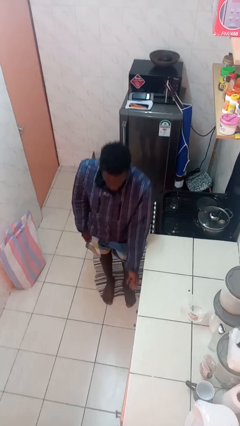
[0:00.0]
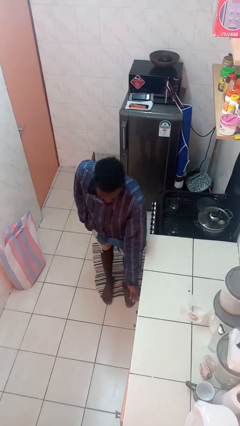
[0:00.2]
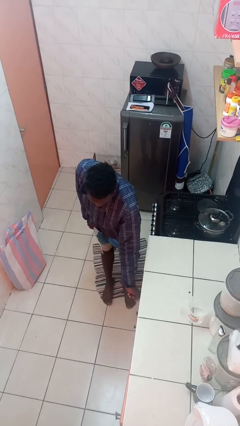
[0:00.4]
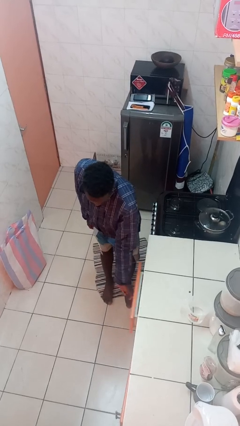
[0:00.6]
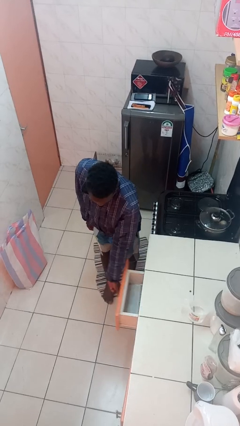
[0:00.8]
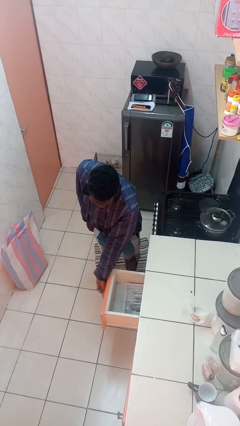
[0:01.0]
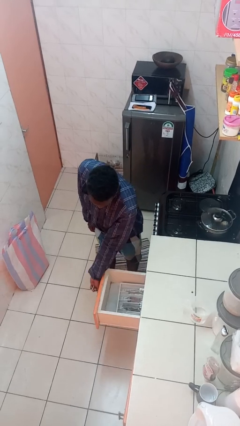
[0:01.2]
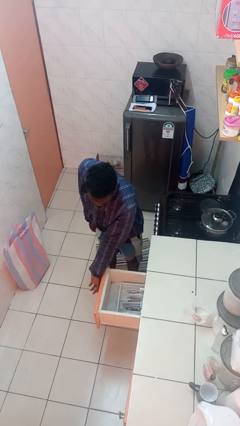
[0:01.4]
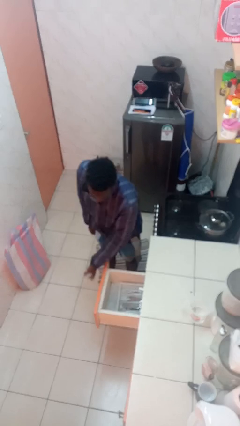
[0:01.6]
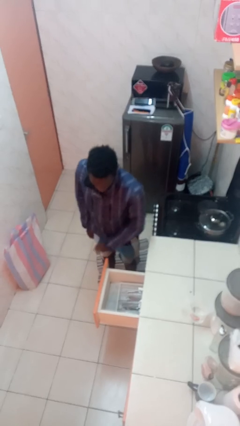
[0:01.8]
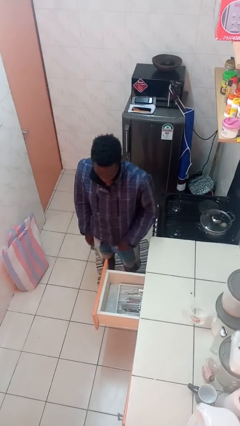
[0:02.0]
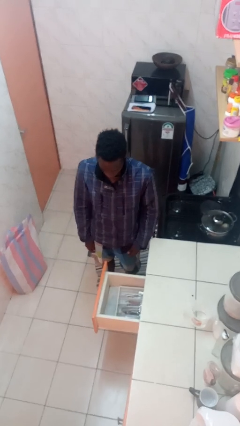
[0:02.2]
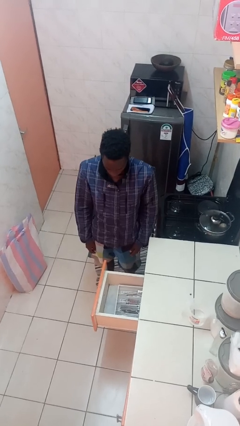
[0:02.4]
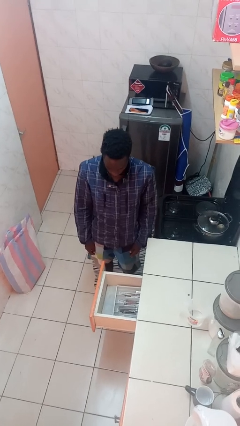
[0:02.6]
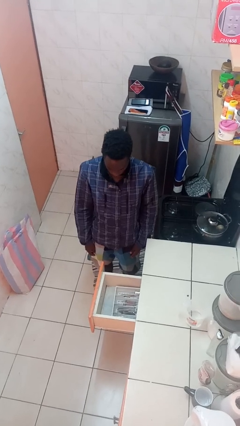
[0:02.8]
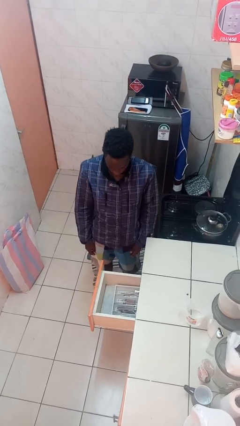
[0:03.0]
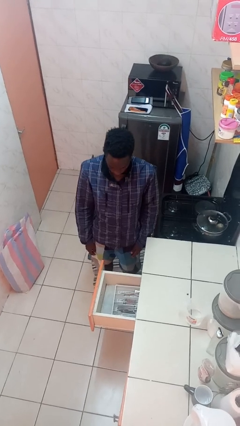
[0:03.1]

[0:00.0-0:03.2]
person opens kitchen drawer

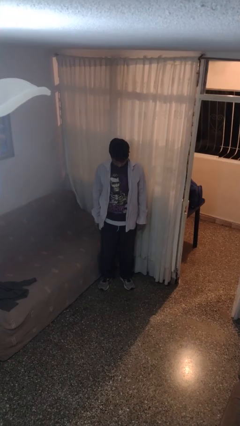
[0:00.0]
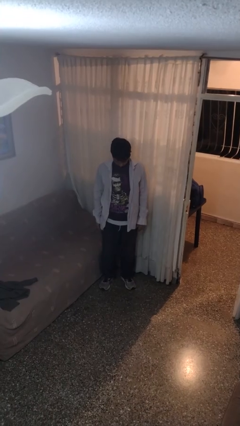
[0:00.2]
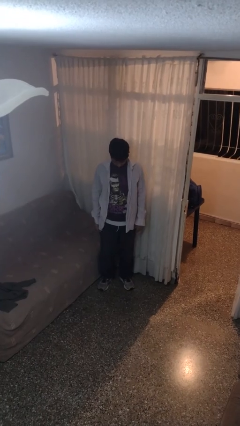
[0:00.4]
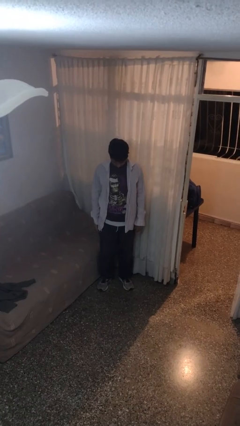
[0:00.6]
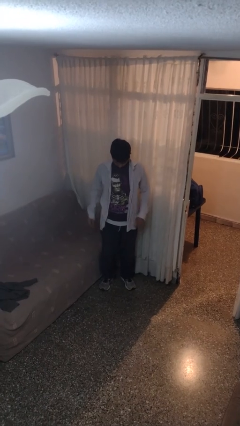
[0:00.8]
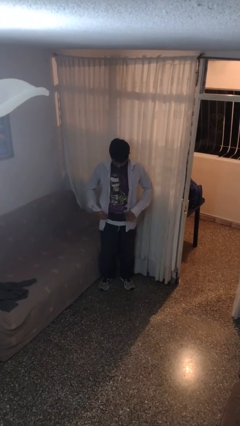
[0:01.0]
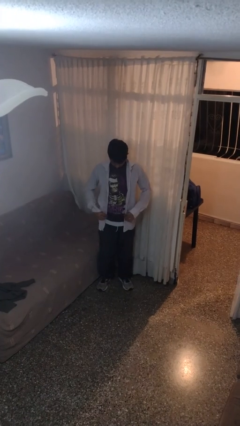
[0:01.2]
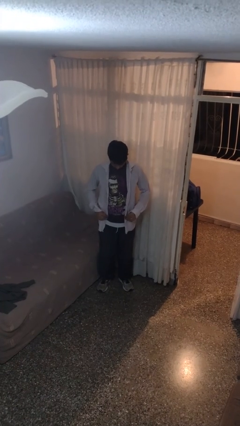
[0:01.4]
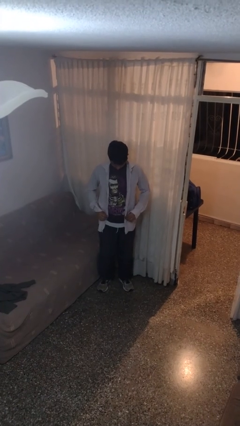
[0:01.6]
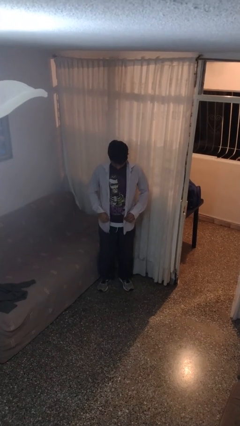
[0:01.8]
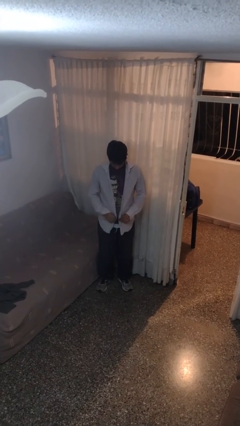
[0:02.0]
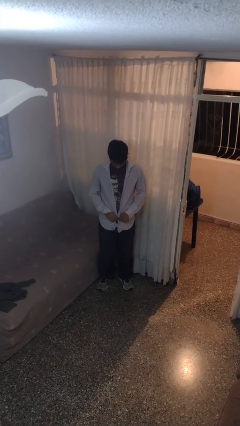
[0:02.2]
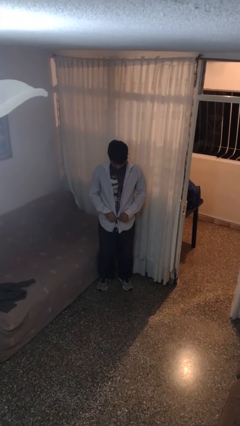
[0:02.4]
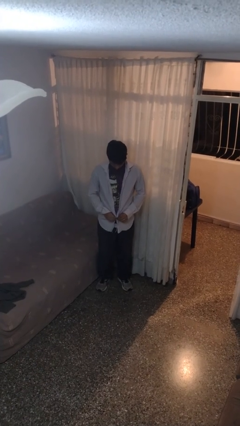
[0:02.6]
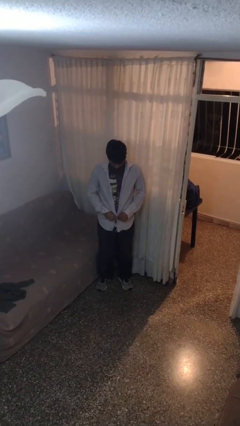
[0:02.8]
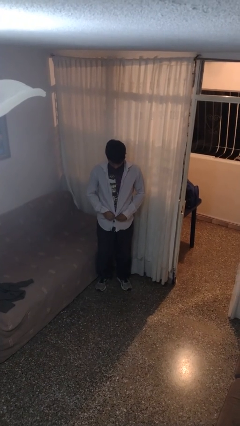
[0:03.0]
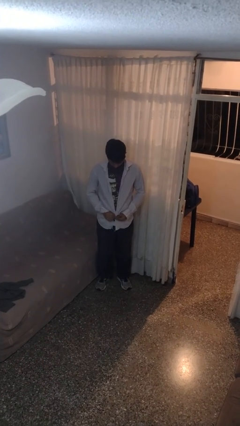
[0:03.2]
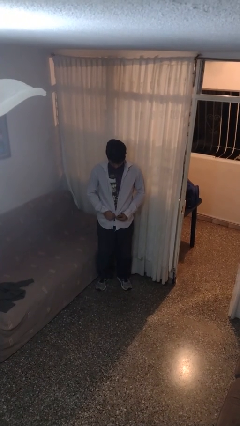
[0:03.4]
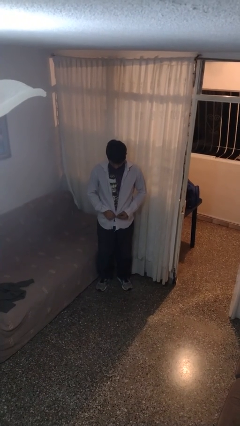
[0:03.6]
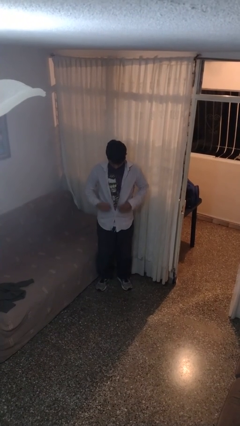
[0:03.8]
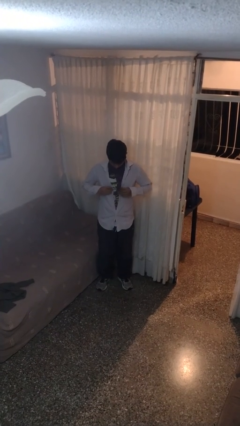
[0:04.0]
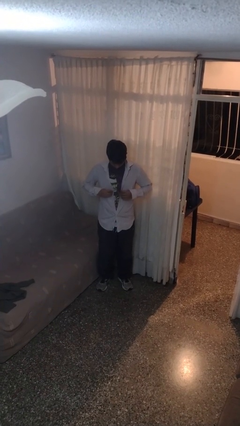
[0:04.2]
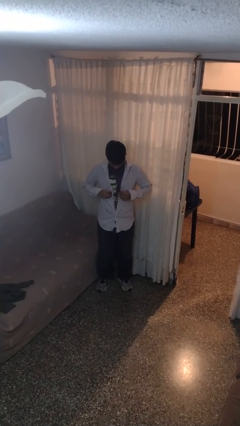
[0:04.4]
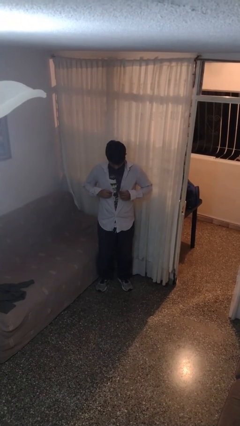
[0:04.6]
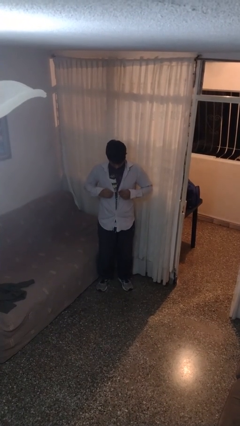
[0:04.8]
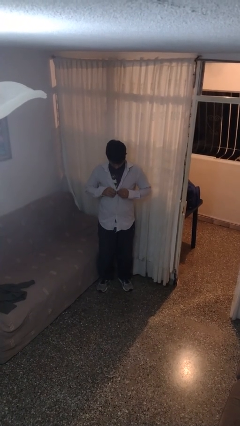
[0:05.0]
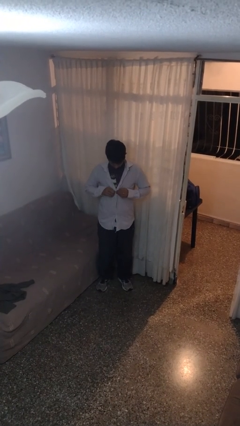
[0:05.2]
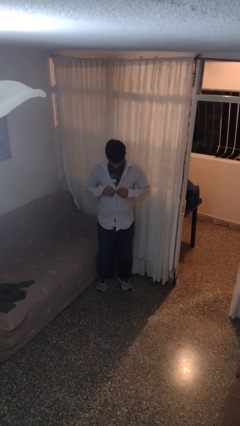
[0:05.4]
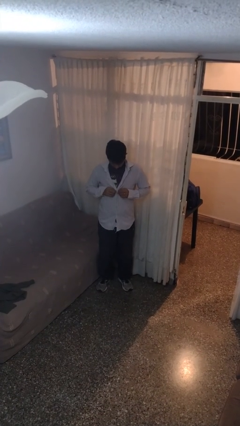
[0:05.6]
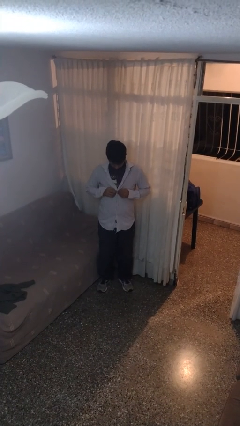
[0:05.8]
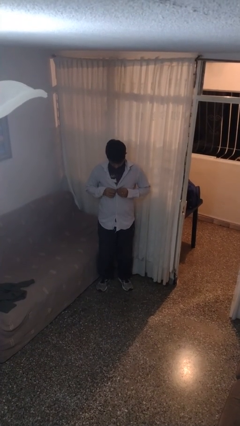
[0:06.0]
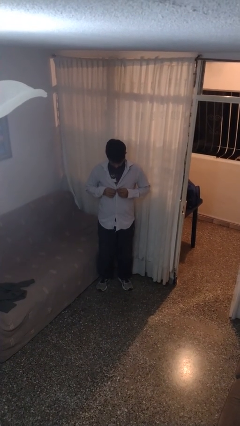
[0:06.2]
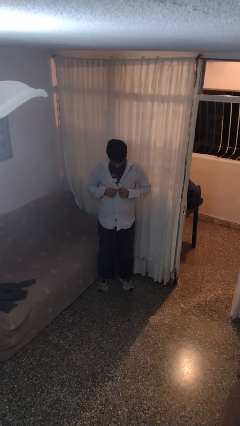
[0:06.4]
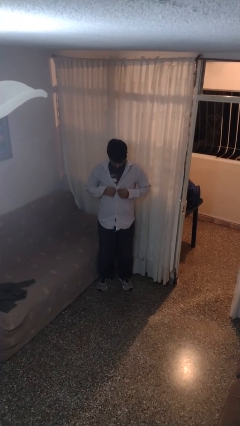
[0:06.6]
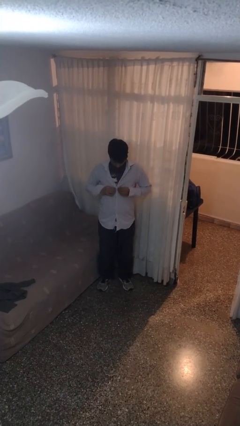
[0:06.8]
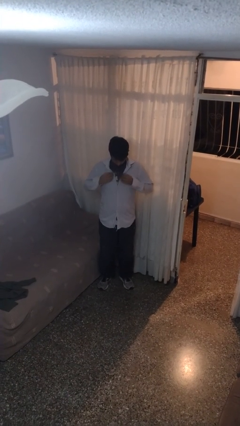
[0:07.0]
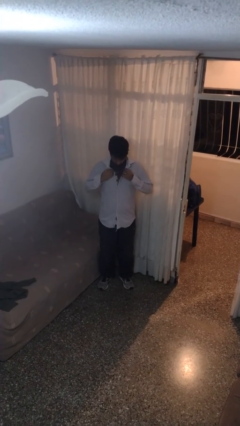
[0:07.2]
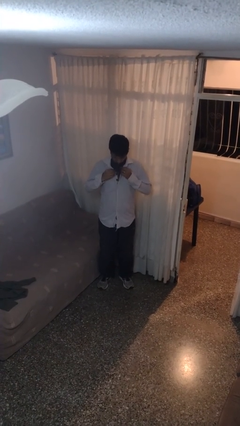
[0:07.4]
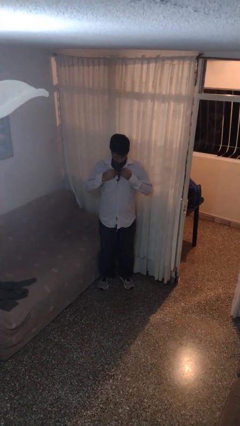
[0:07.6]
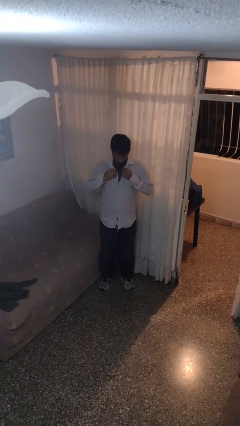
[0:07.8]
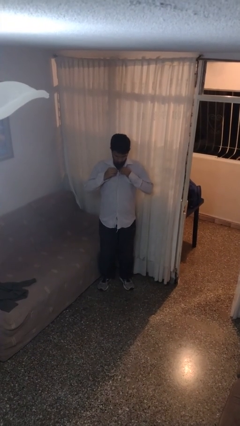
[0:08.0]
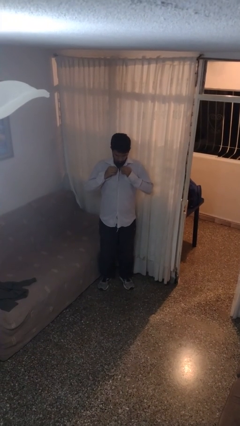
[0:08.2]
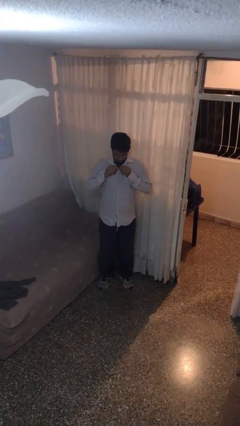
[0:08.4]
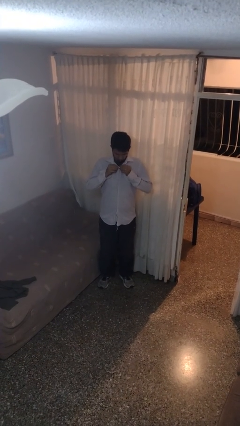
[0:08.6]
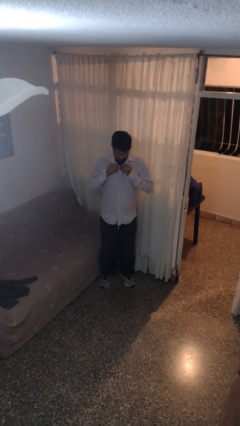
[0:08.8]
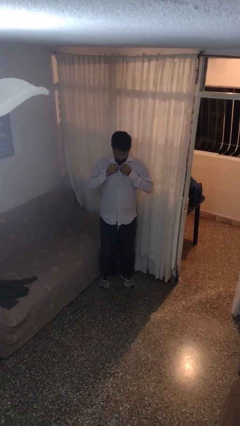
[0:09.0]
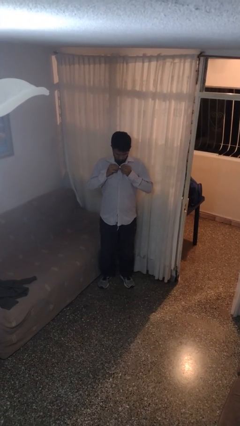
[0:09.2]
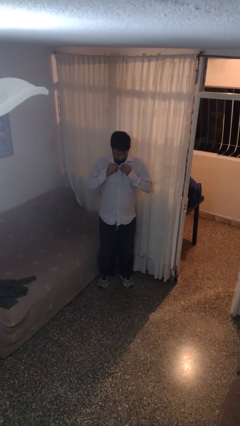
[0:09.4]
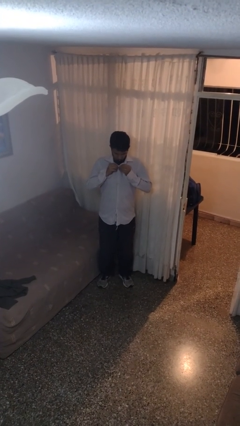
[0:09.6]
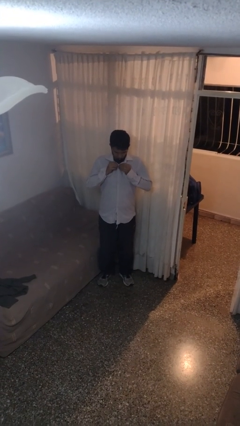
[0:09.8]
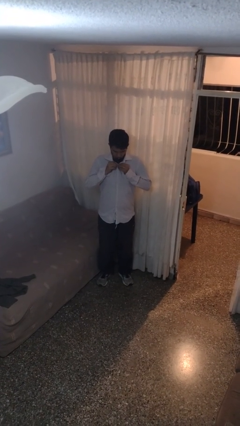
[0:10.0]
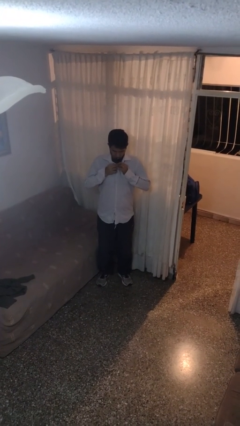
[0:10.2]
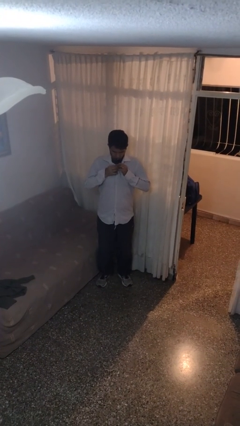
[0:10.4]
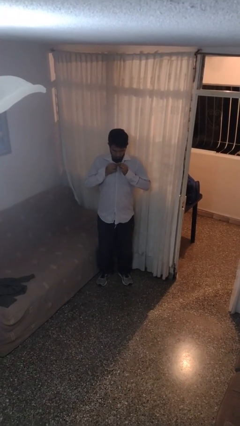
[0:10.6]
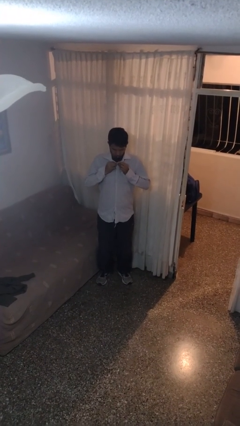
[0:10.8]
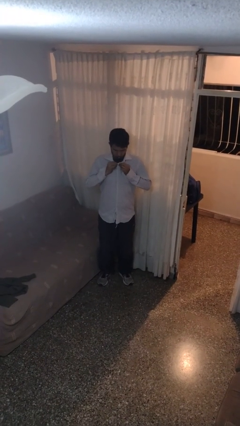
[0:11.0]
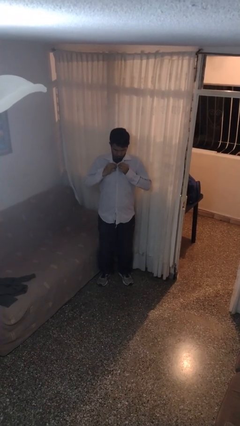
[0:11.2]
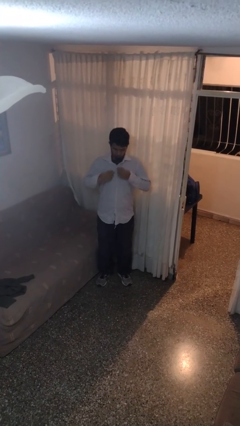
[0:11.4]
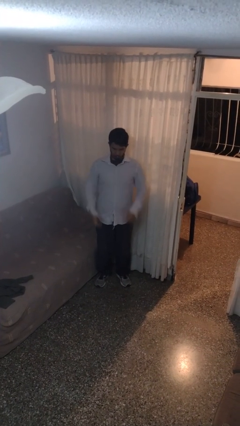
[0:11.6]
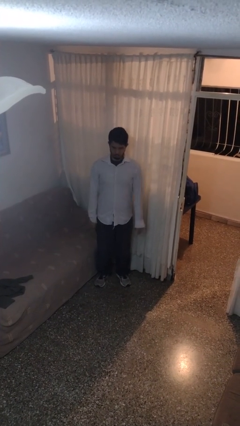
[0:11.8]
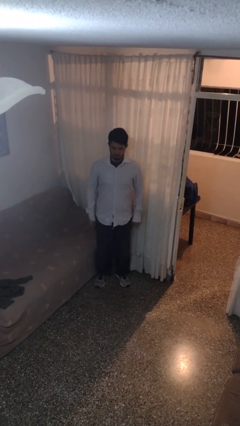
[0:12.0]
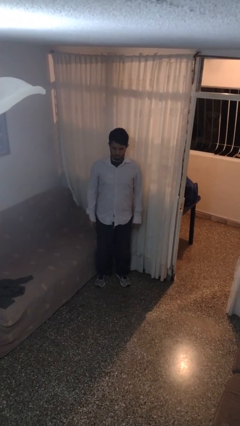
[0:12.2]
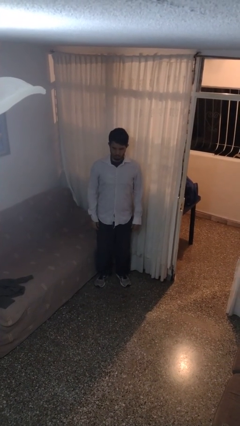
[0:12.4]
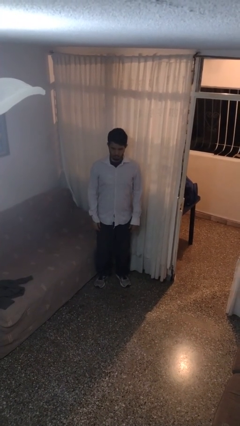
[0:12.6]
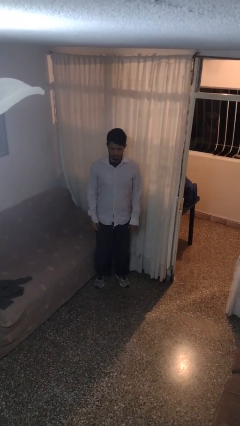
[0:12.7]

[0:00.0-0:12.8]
person buttons shirt

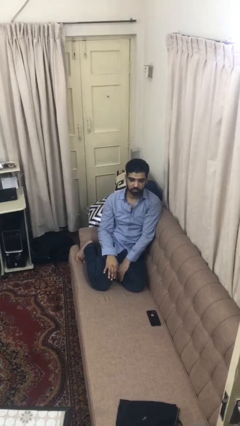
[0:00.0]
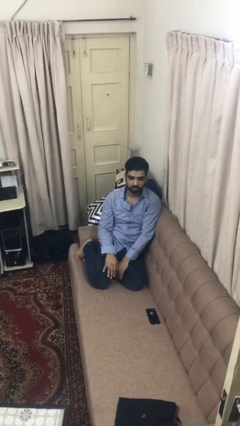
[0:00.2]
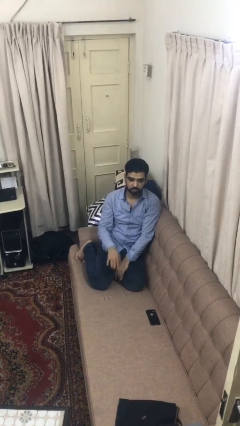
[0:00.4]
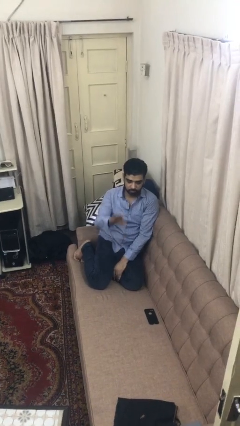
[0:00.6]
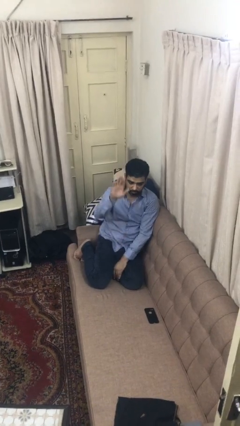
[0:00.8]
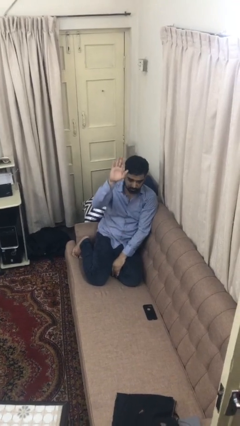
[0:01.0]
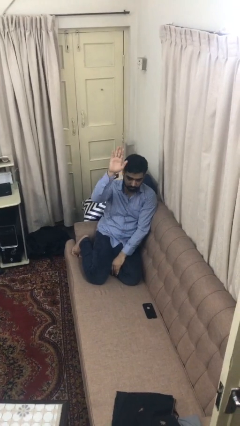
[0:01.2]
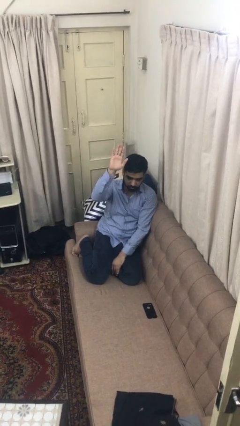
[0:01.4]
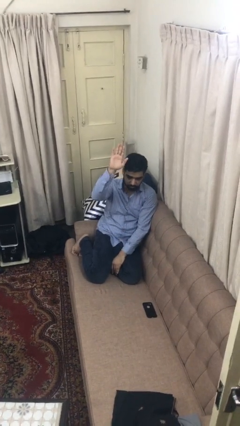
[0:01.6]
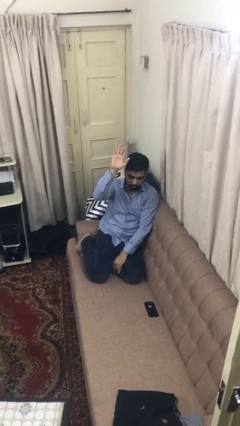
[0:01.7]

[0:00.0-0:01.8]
person gestures raise hand

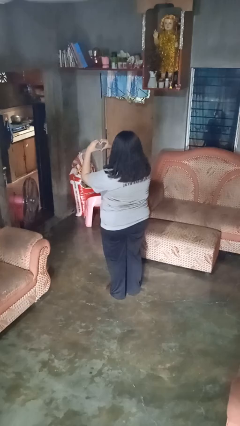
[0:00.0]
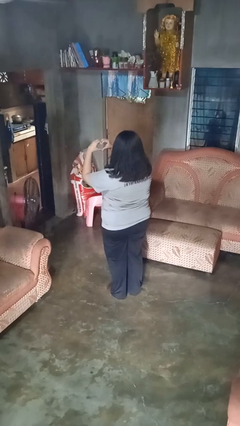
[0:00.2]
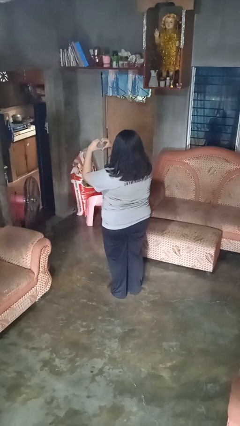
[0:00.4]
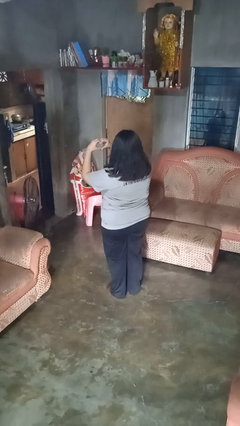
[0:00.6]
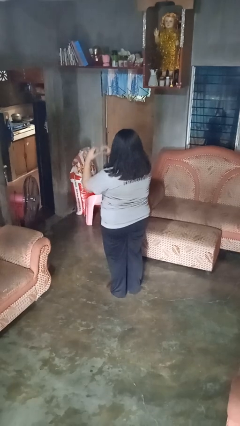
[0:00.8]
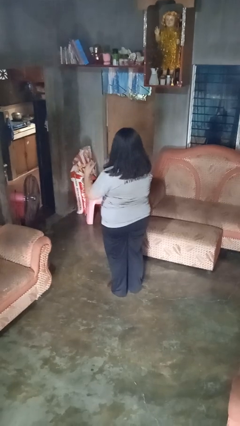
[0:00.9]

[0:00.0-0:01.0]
person gestures heart
